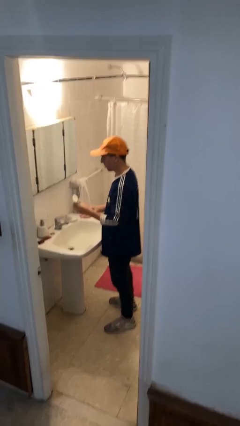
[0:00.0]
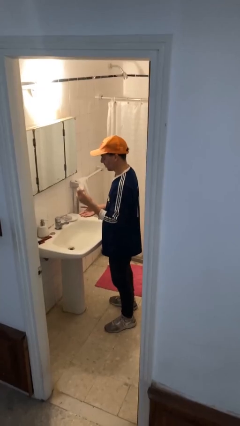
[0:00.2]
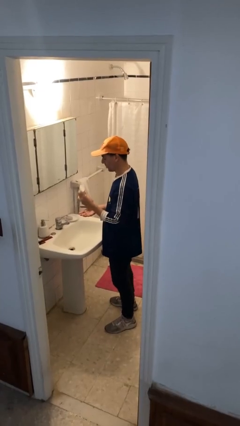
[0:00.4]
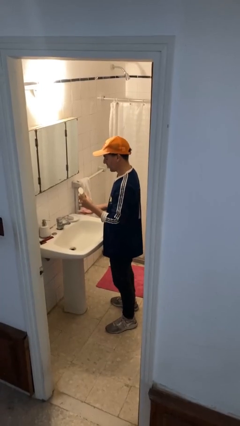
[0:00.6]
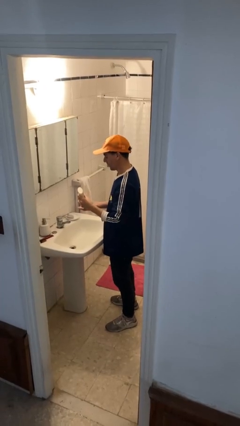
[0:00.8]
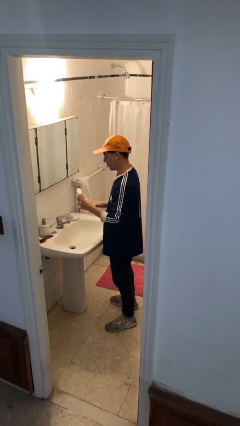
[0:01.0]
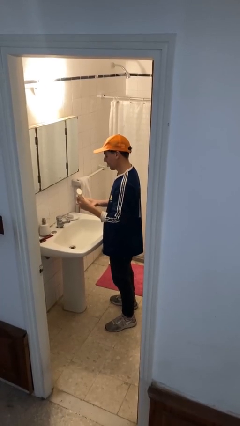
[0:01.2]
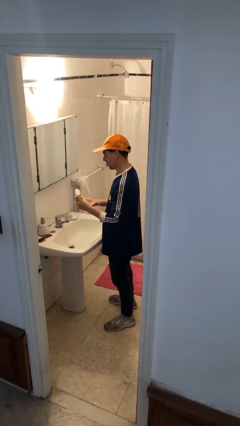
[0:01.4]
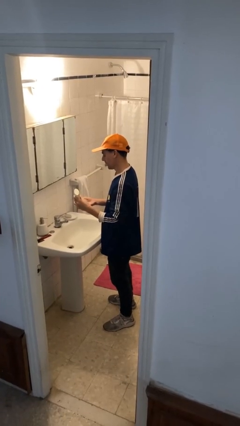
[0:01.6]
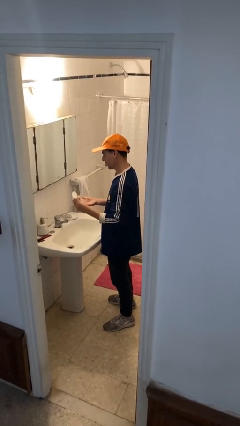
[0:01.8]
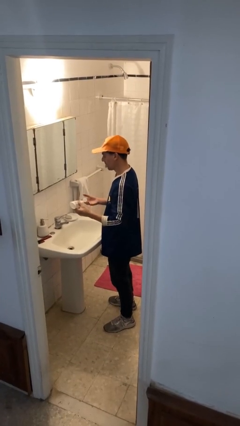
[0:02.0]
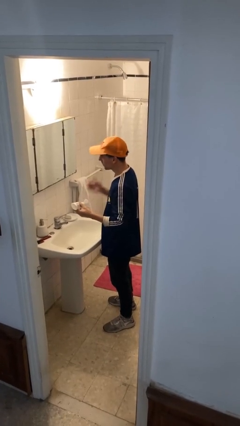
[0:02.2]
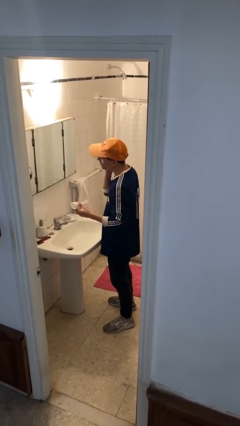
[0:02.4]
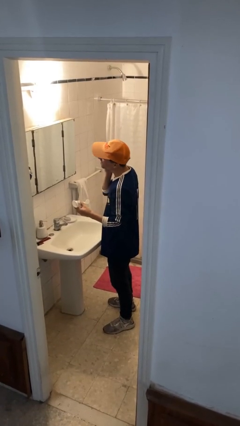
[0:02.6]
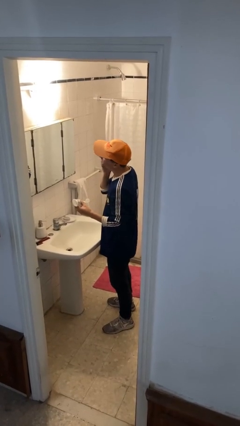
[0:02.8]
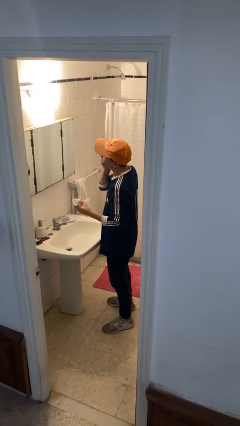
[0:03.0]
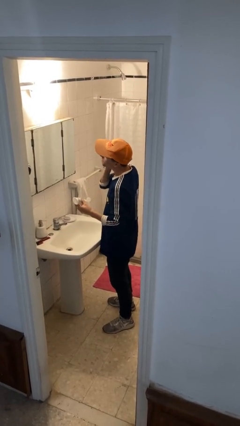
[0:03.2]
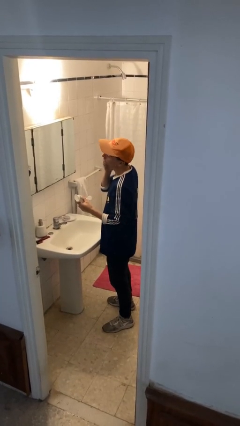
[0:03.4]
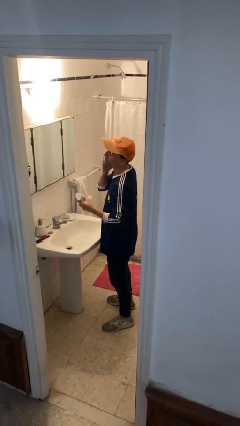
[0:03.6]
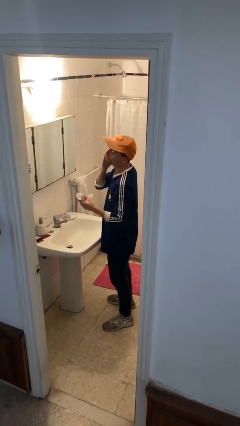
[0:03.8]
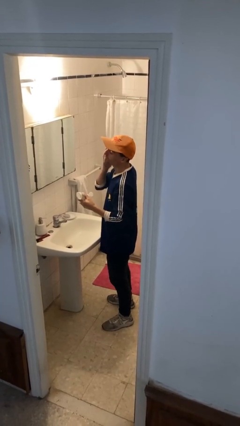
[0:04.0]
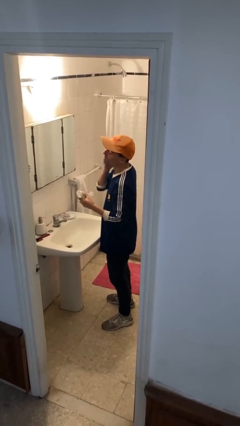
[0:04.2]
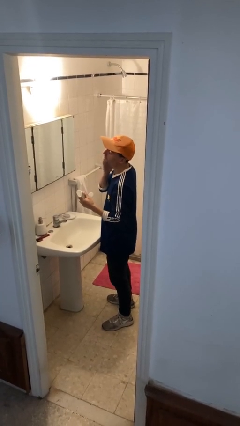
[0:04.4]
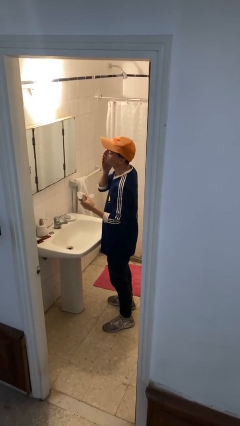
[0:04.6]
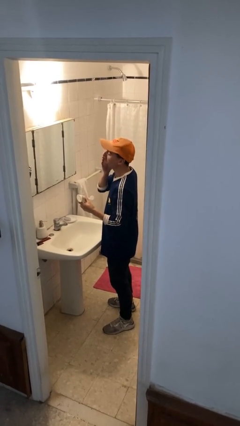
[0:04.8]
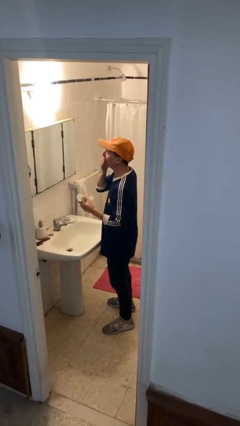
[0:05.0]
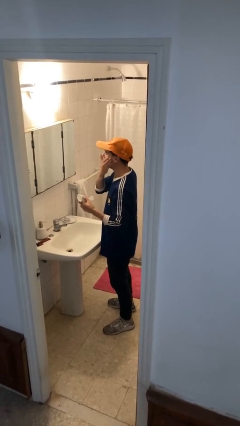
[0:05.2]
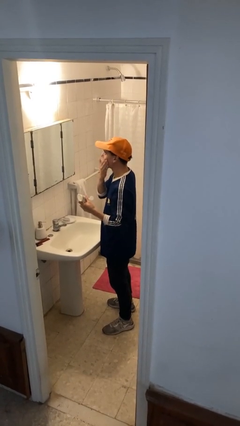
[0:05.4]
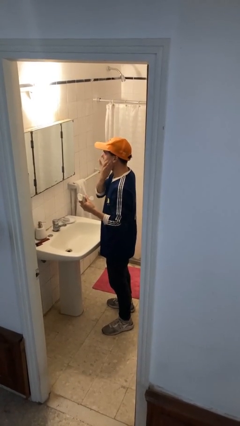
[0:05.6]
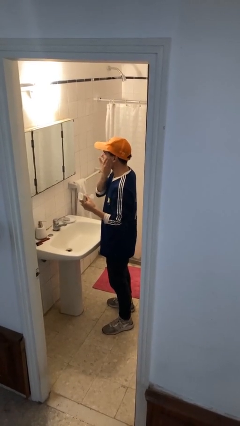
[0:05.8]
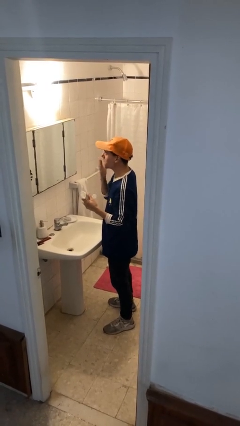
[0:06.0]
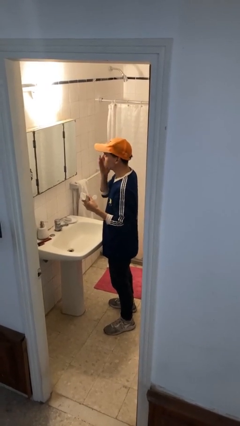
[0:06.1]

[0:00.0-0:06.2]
person applies facial moisturizer

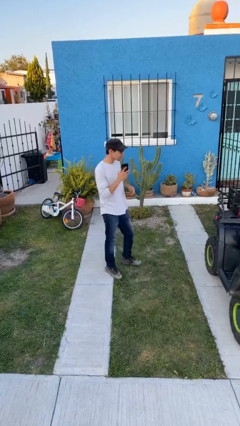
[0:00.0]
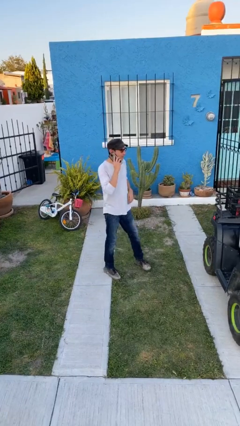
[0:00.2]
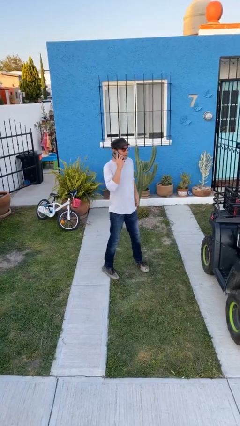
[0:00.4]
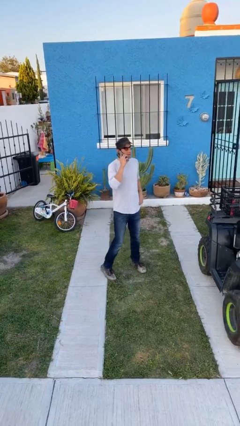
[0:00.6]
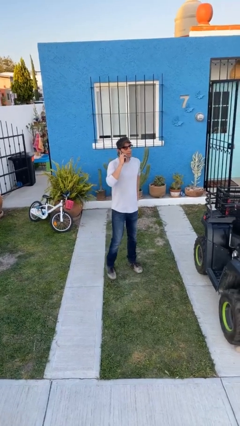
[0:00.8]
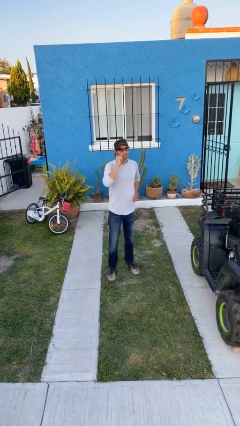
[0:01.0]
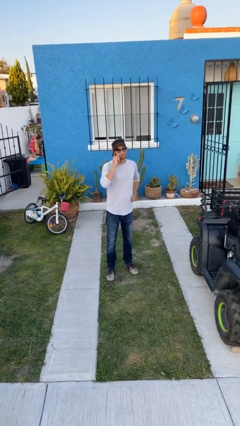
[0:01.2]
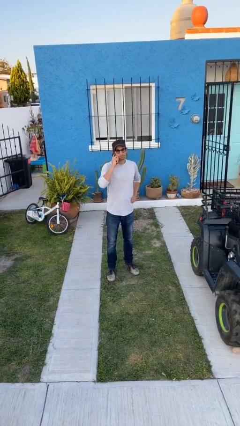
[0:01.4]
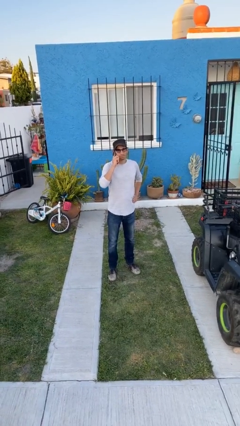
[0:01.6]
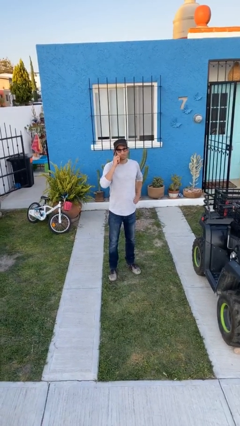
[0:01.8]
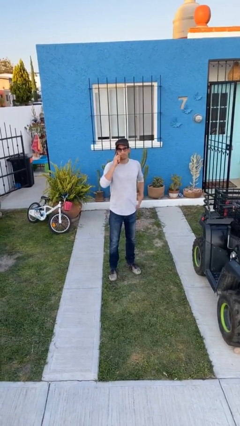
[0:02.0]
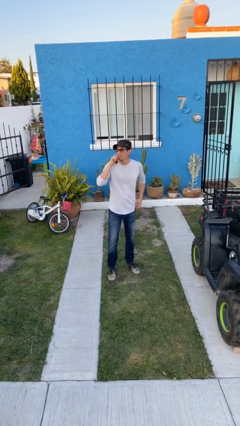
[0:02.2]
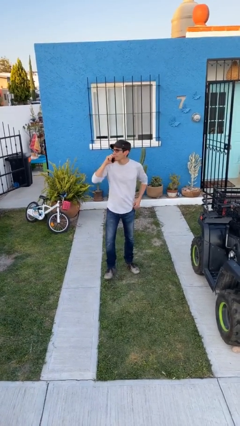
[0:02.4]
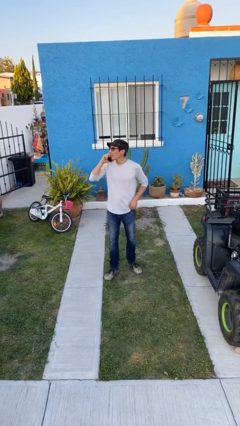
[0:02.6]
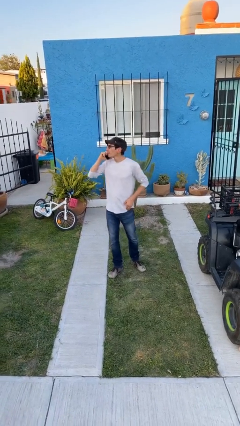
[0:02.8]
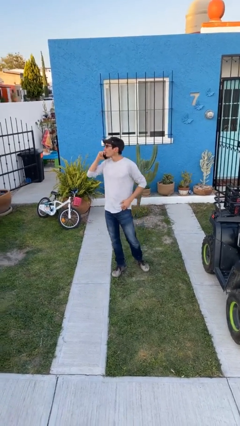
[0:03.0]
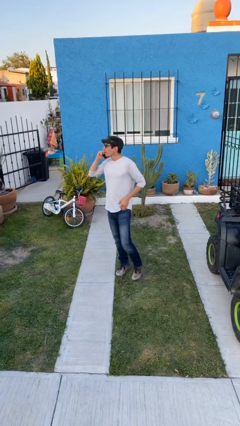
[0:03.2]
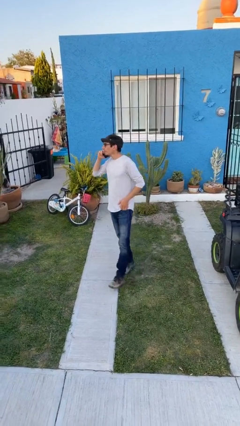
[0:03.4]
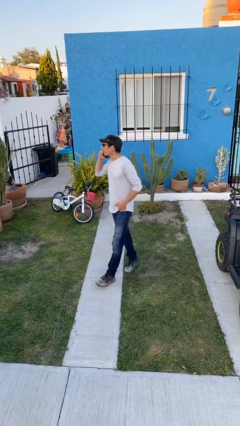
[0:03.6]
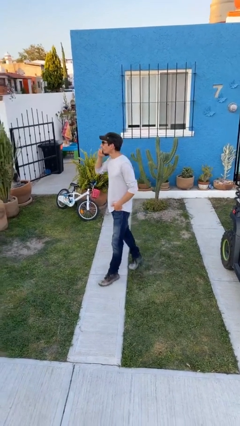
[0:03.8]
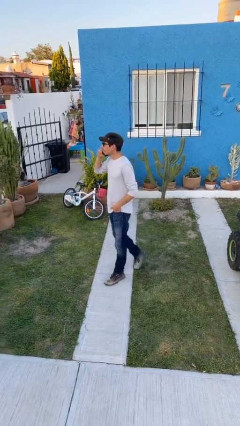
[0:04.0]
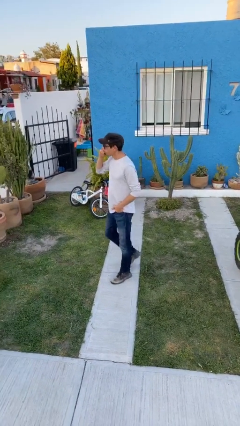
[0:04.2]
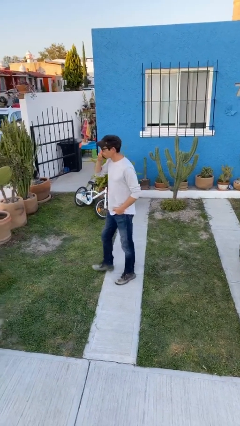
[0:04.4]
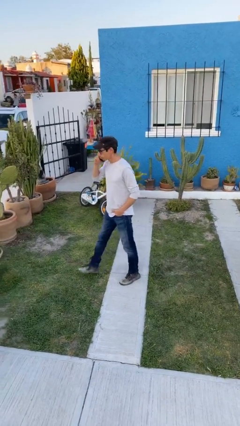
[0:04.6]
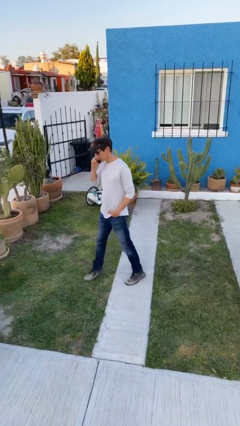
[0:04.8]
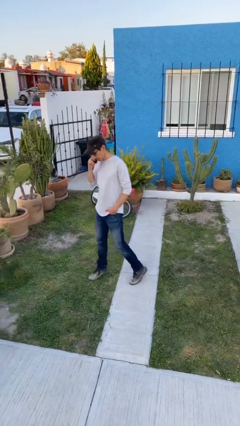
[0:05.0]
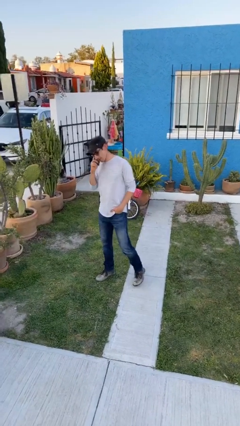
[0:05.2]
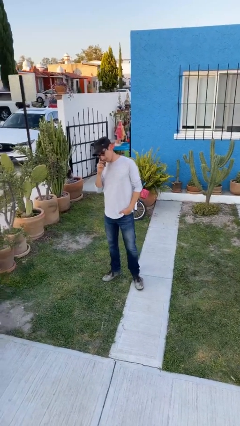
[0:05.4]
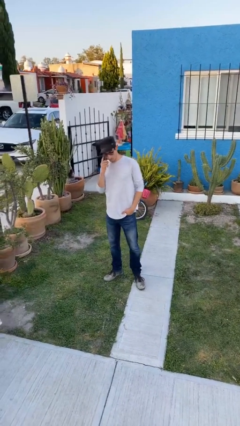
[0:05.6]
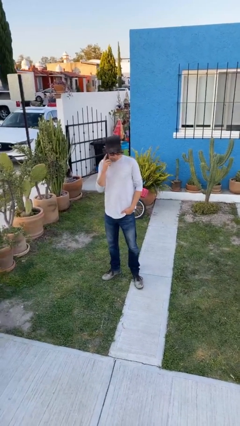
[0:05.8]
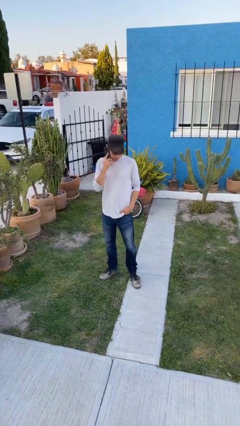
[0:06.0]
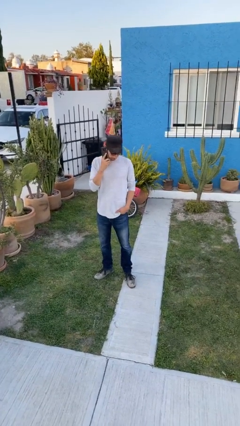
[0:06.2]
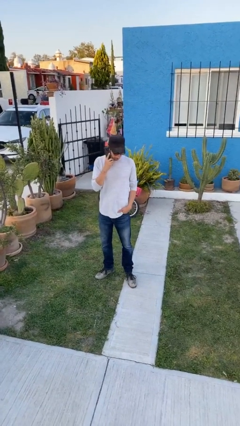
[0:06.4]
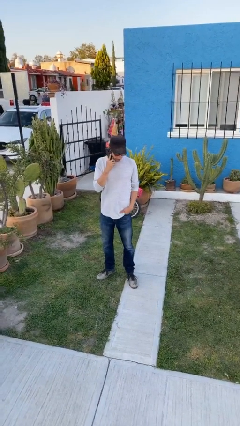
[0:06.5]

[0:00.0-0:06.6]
person talks on phone

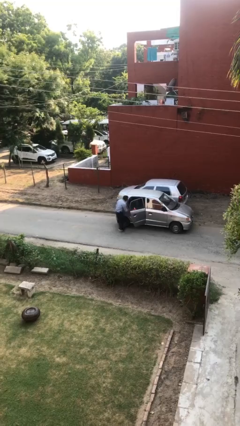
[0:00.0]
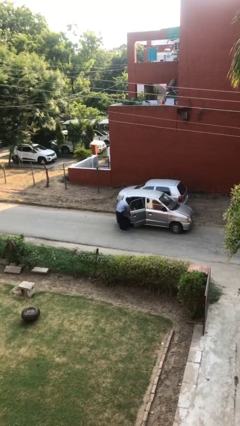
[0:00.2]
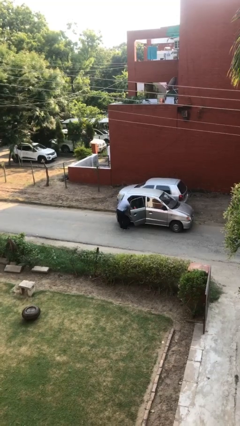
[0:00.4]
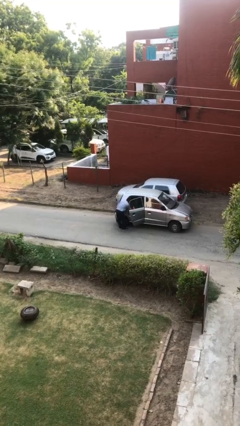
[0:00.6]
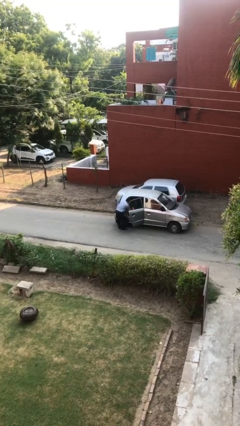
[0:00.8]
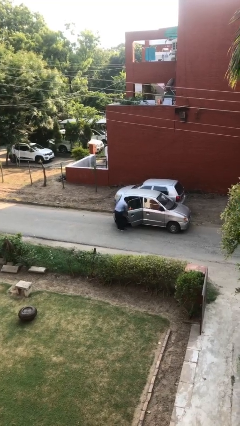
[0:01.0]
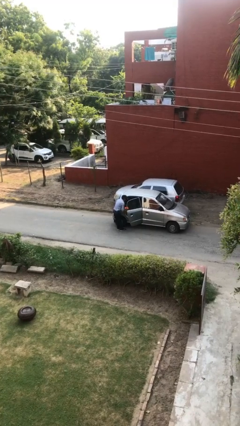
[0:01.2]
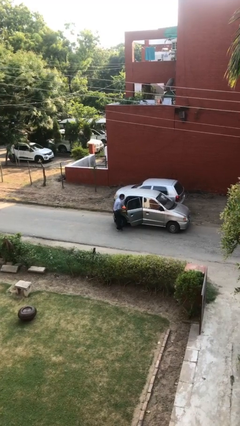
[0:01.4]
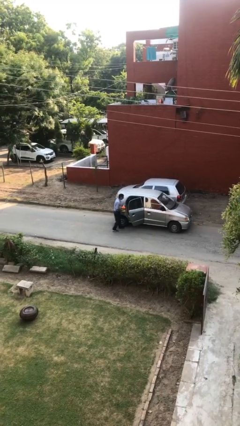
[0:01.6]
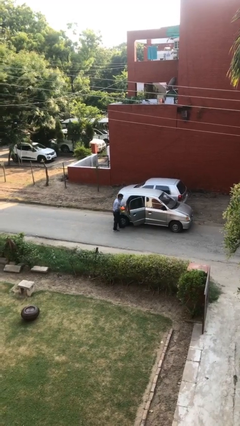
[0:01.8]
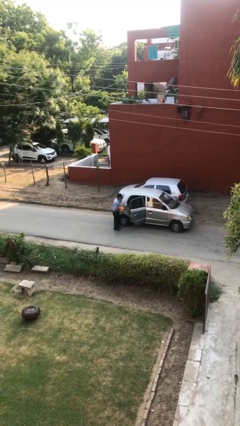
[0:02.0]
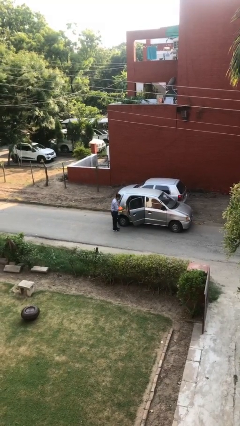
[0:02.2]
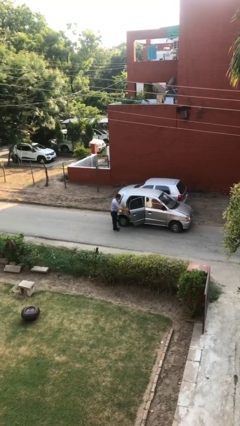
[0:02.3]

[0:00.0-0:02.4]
person unloads car

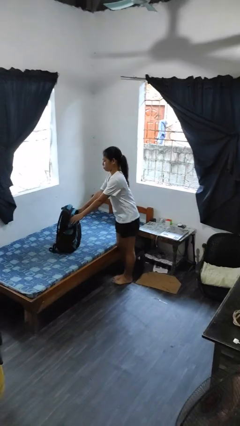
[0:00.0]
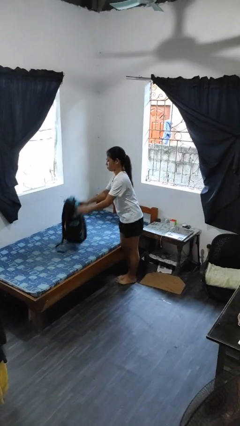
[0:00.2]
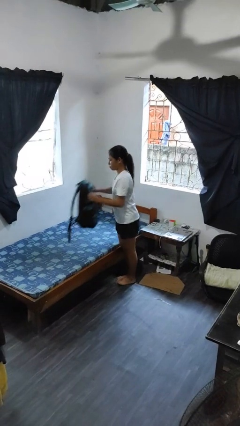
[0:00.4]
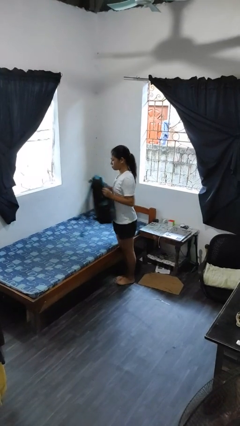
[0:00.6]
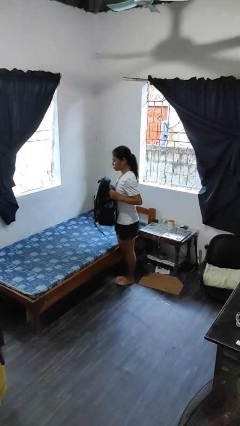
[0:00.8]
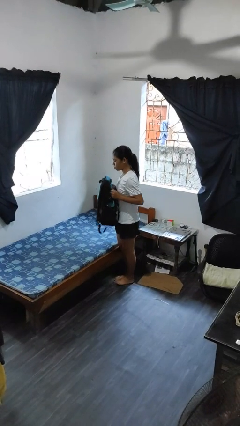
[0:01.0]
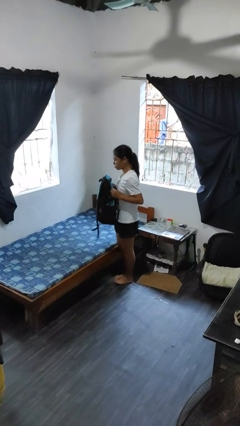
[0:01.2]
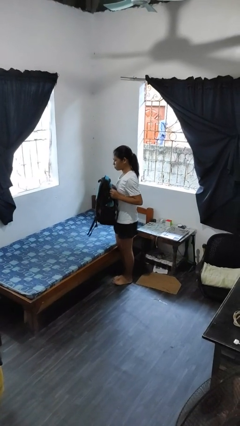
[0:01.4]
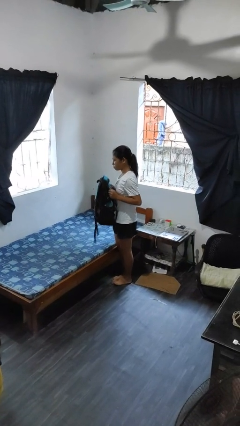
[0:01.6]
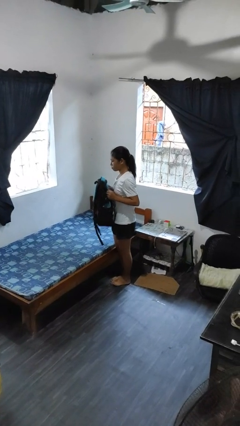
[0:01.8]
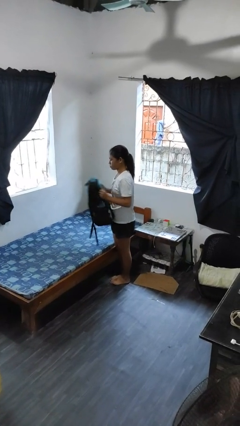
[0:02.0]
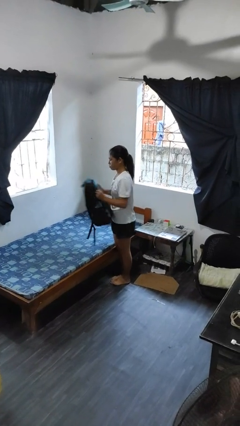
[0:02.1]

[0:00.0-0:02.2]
person picks up object from bed

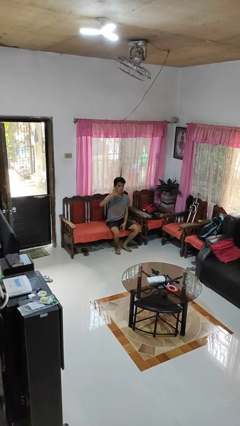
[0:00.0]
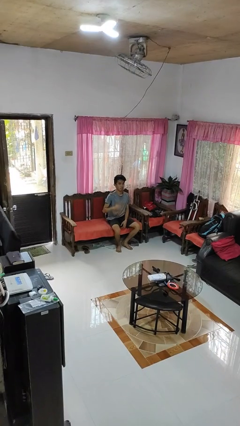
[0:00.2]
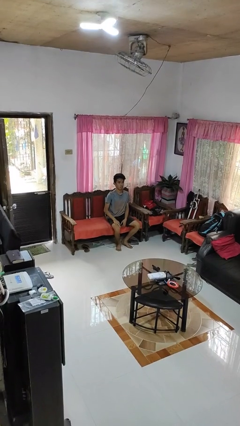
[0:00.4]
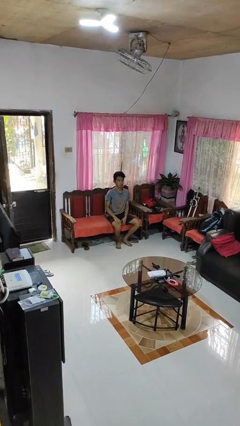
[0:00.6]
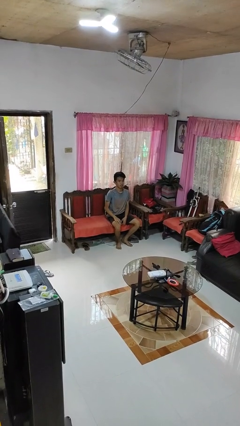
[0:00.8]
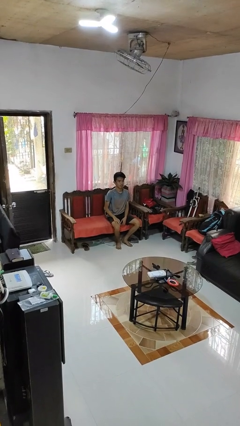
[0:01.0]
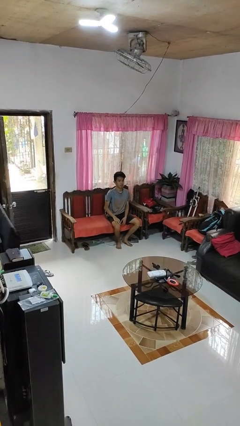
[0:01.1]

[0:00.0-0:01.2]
person gestures lower hand
